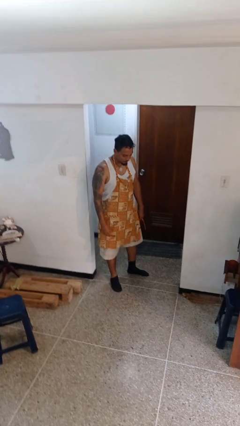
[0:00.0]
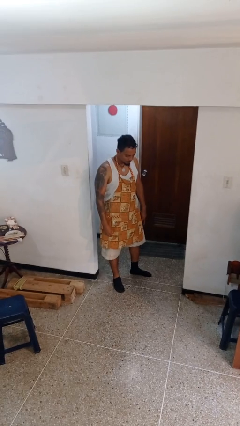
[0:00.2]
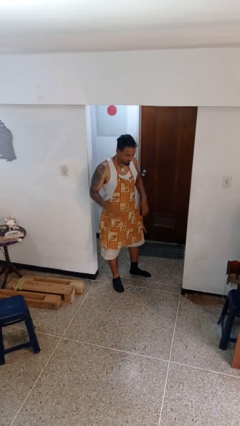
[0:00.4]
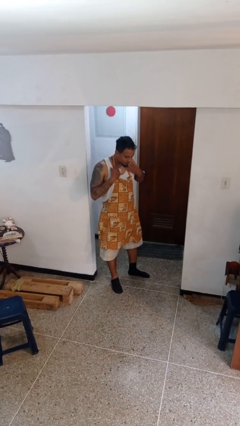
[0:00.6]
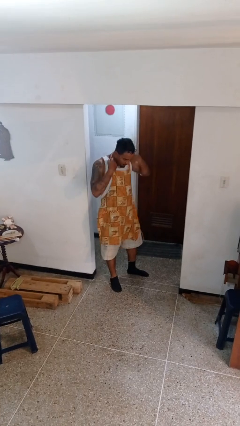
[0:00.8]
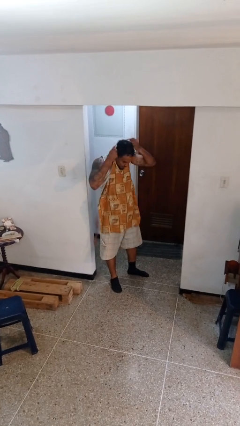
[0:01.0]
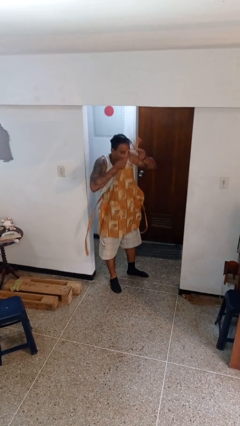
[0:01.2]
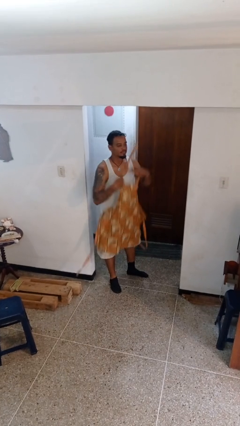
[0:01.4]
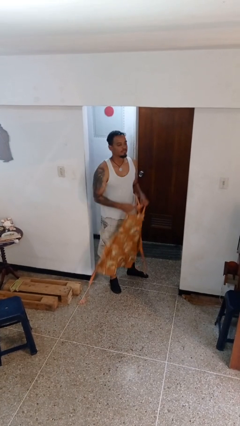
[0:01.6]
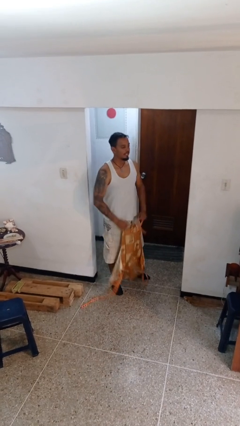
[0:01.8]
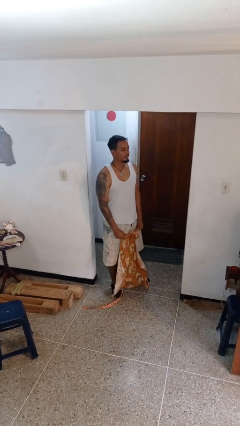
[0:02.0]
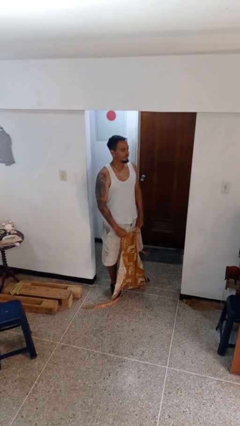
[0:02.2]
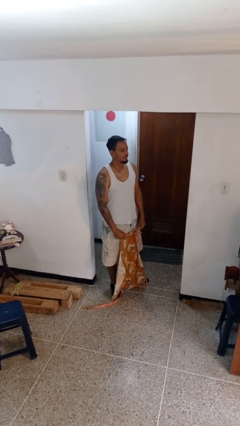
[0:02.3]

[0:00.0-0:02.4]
person takes off apron

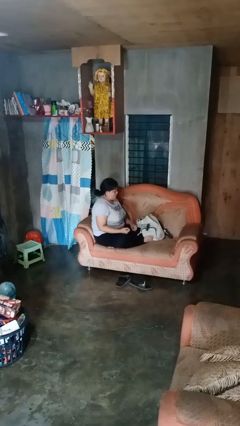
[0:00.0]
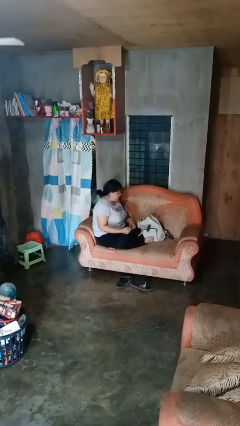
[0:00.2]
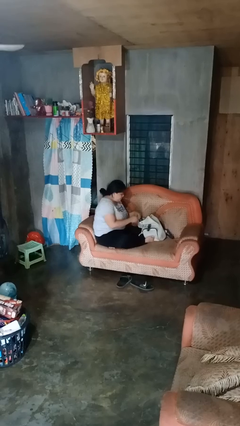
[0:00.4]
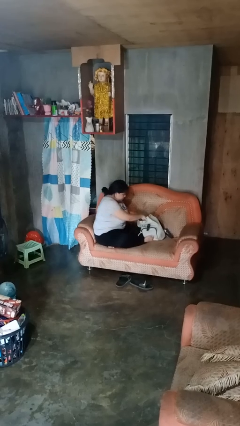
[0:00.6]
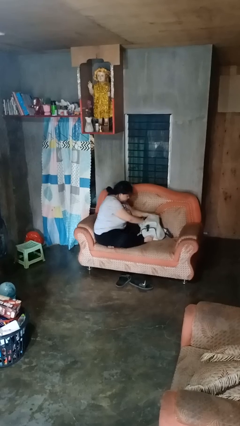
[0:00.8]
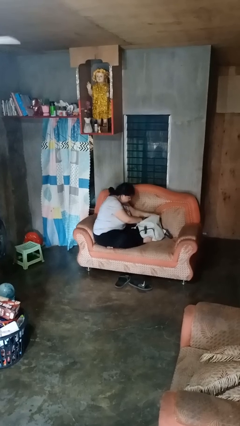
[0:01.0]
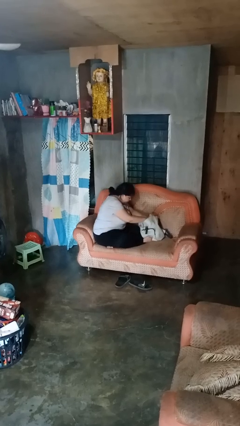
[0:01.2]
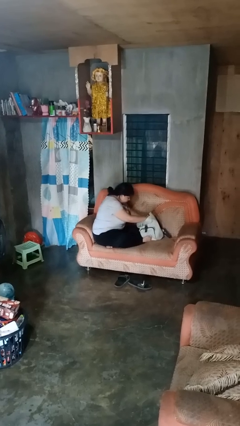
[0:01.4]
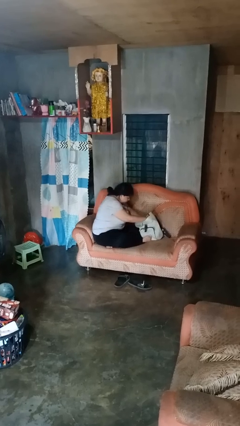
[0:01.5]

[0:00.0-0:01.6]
person searches in backpack

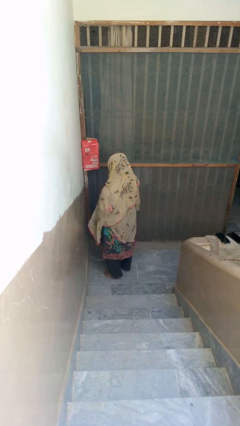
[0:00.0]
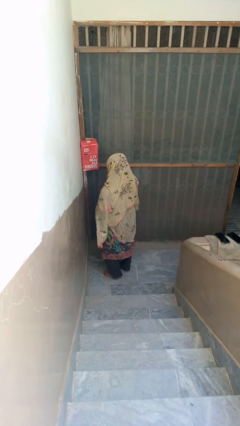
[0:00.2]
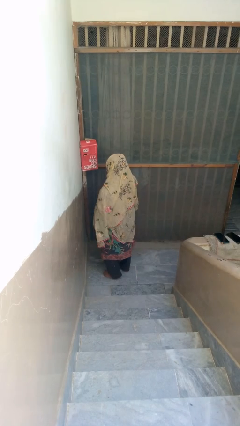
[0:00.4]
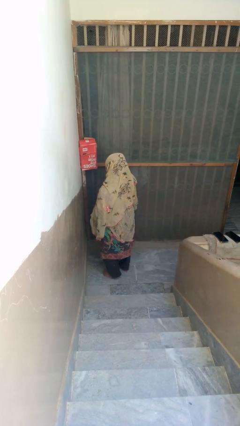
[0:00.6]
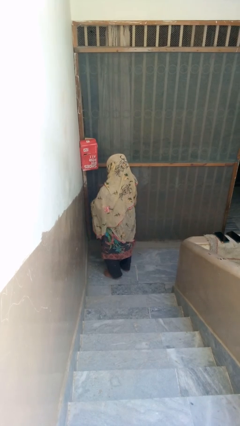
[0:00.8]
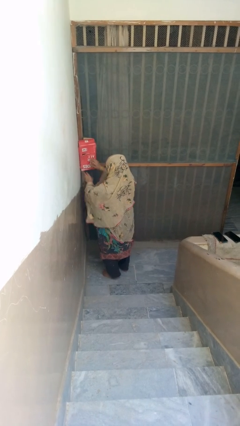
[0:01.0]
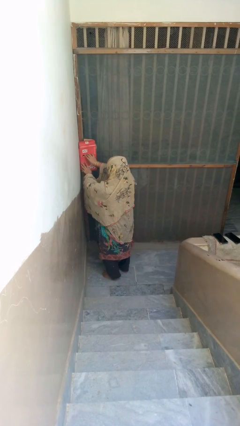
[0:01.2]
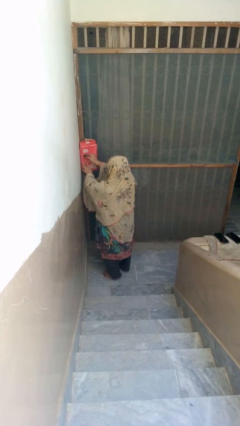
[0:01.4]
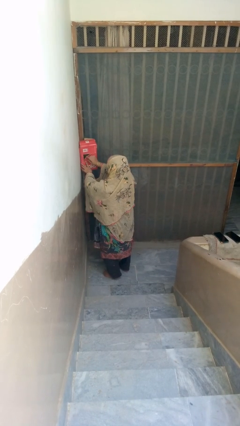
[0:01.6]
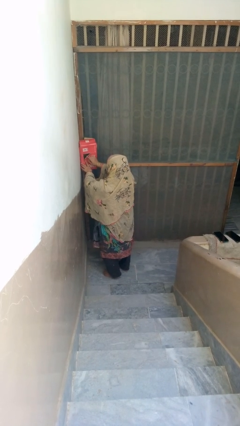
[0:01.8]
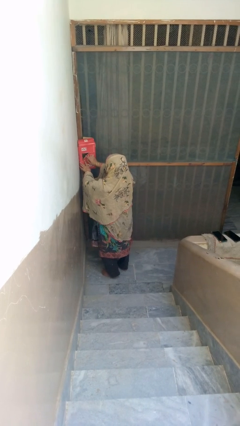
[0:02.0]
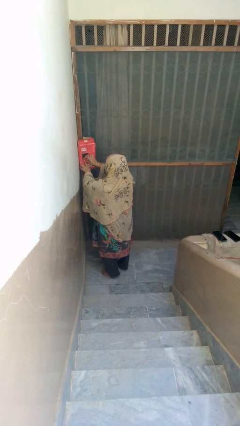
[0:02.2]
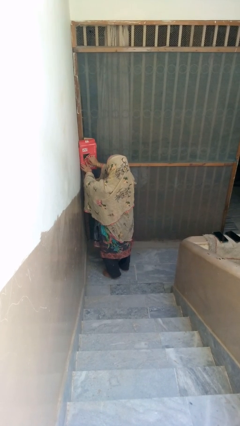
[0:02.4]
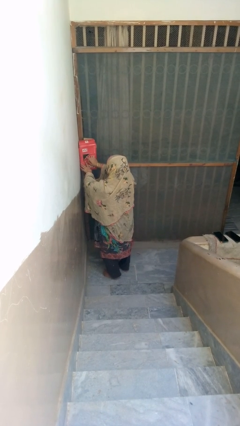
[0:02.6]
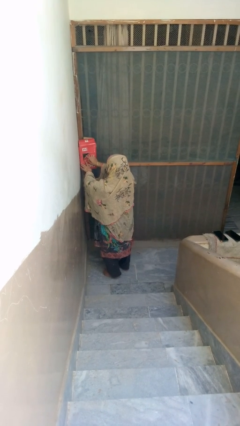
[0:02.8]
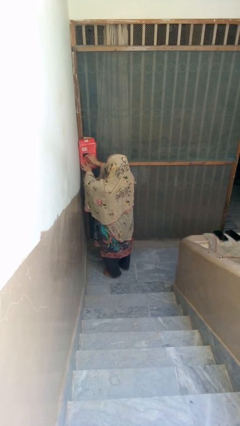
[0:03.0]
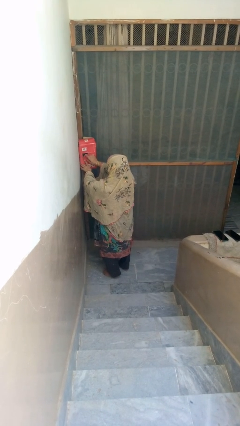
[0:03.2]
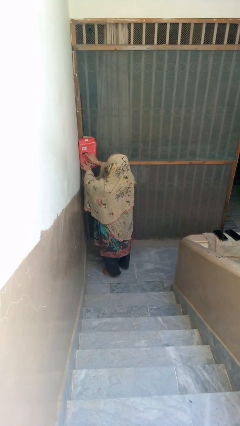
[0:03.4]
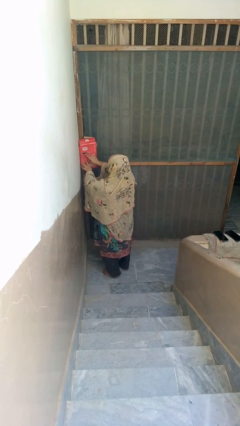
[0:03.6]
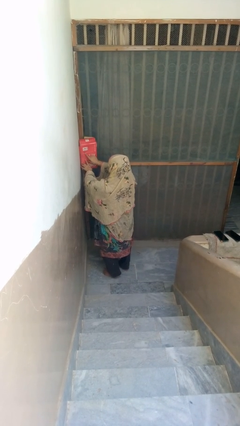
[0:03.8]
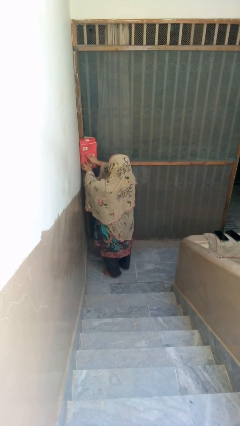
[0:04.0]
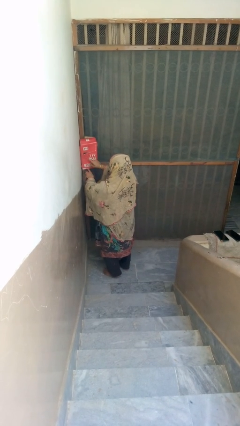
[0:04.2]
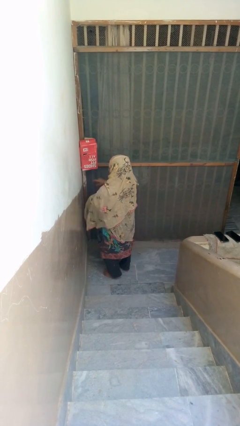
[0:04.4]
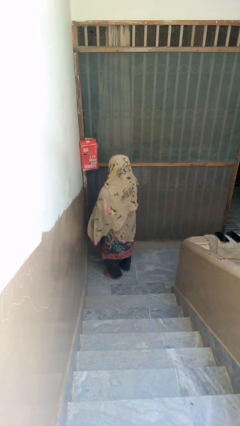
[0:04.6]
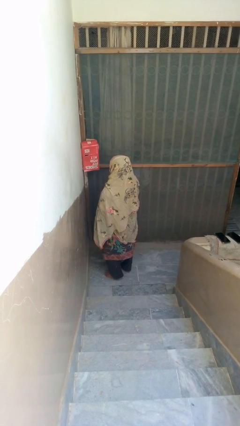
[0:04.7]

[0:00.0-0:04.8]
person opens mailbox

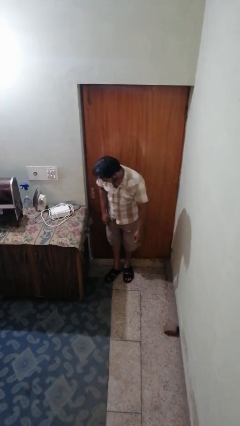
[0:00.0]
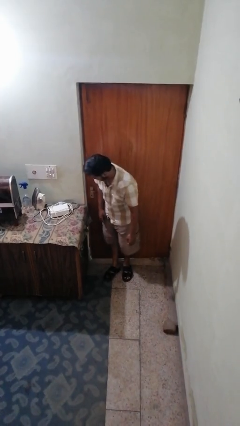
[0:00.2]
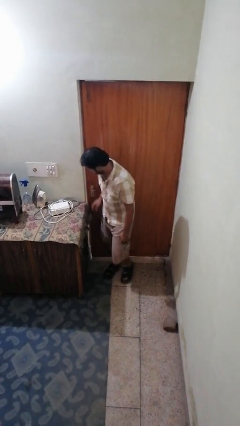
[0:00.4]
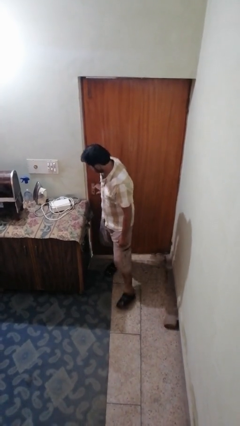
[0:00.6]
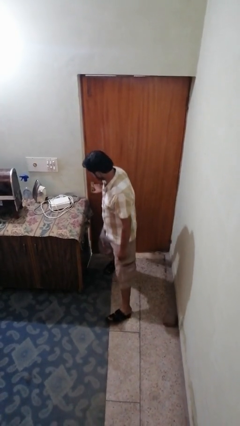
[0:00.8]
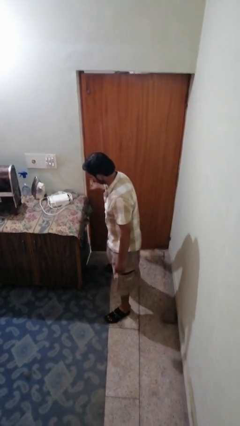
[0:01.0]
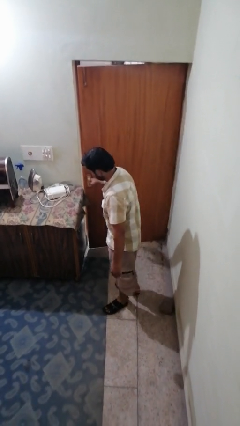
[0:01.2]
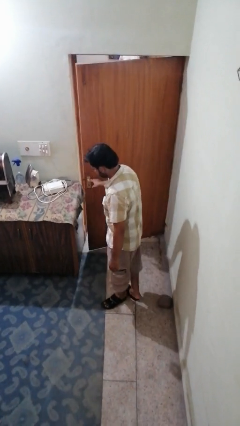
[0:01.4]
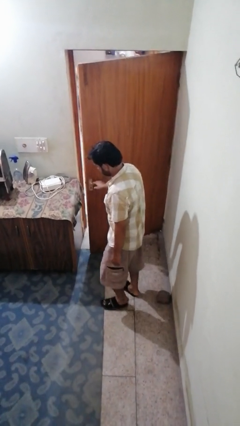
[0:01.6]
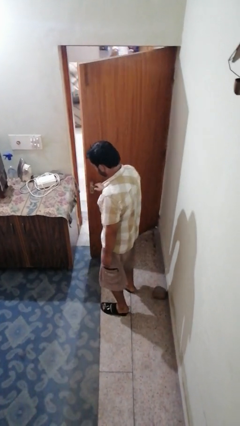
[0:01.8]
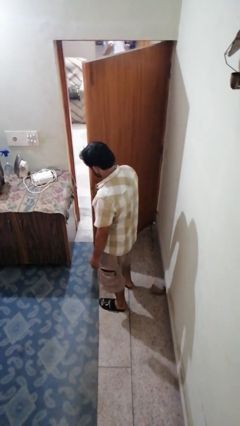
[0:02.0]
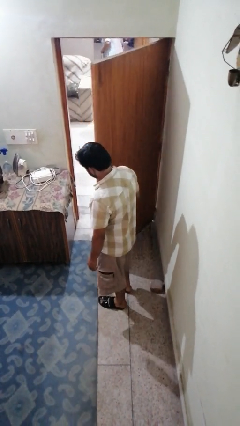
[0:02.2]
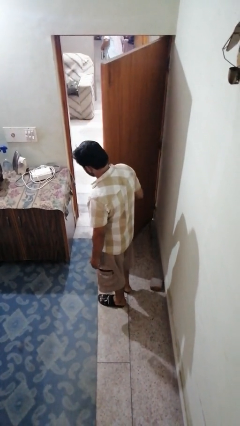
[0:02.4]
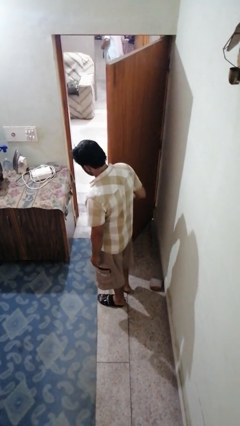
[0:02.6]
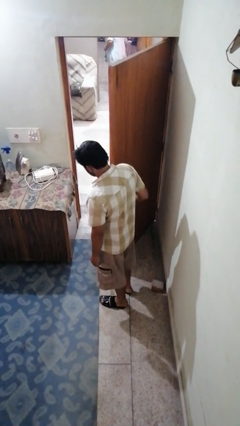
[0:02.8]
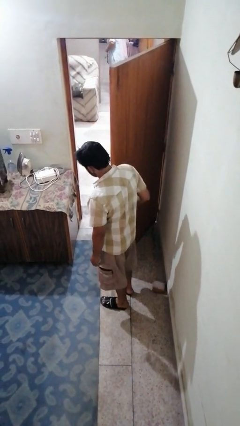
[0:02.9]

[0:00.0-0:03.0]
person opens facility door

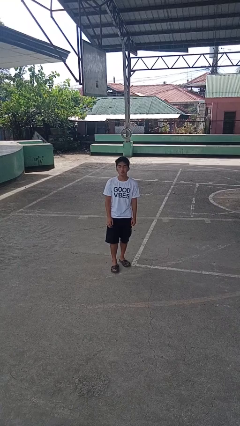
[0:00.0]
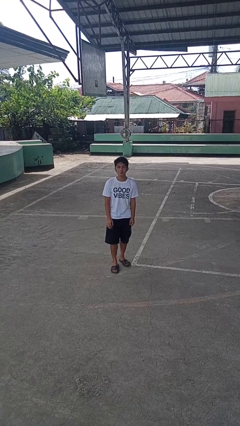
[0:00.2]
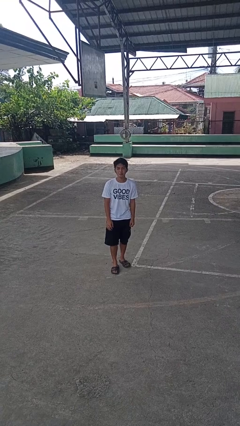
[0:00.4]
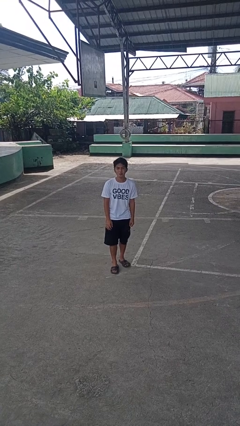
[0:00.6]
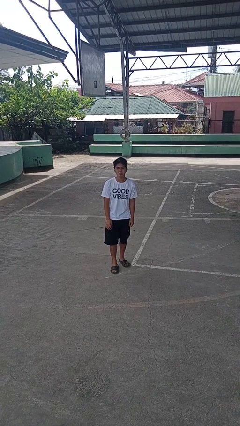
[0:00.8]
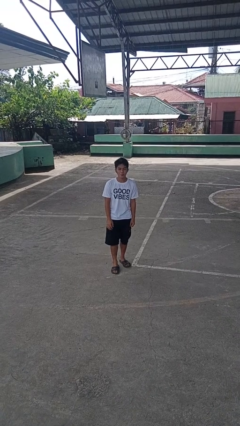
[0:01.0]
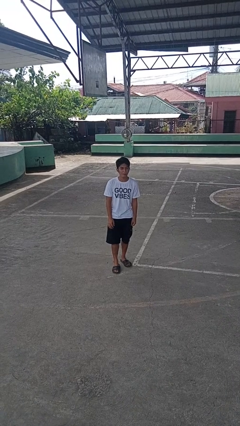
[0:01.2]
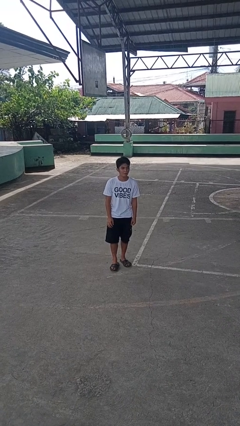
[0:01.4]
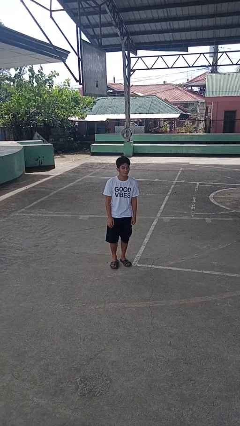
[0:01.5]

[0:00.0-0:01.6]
person sticks out tongue

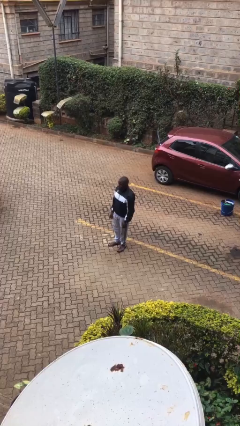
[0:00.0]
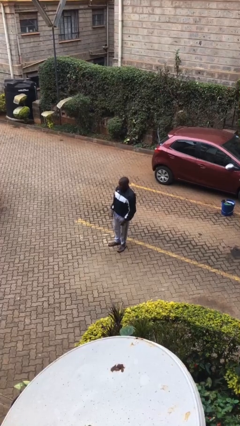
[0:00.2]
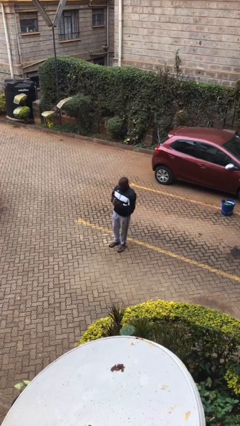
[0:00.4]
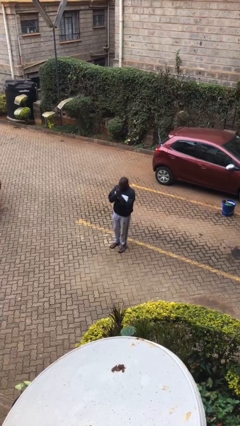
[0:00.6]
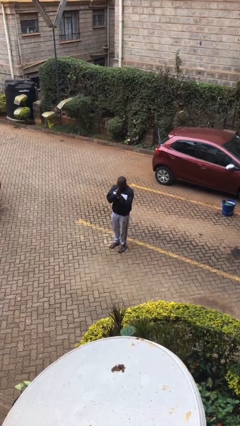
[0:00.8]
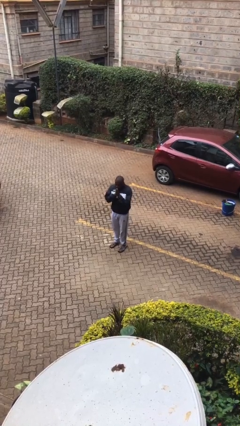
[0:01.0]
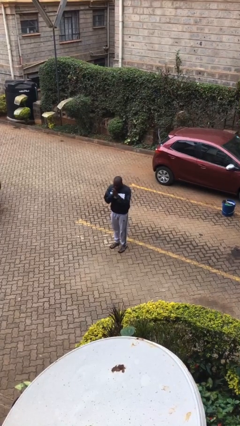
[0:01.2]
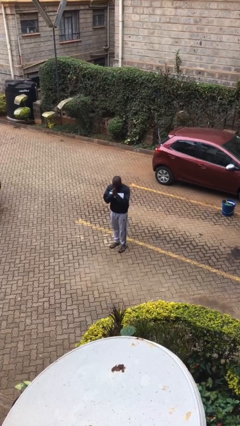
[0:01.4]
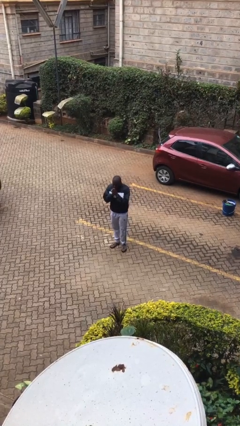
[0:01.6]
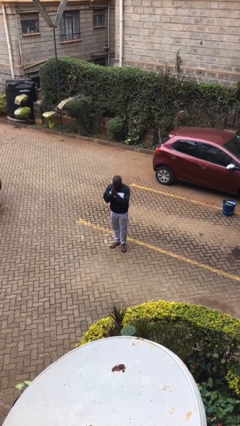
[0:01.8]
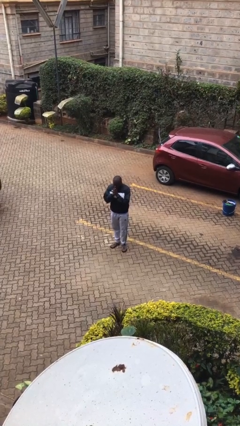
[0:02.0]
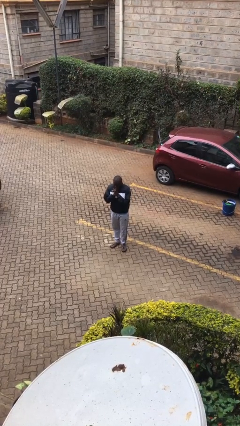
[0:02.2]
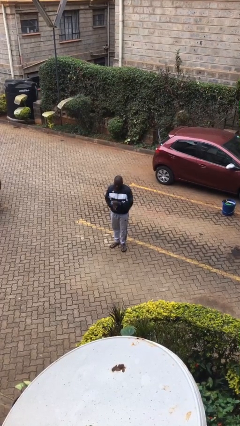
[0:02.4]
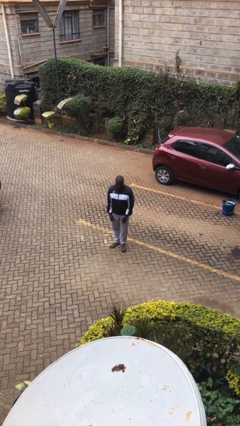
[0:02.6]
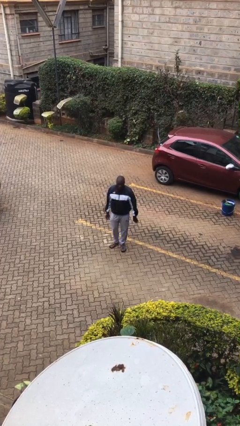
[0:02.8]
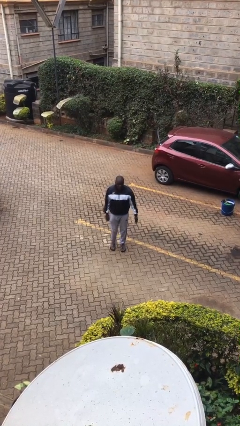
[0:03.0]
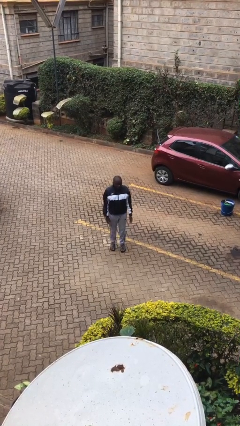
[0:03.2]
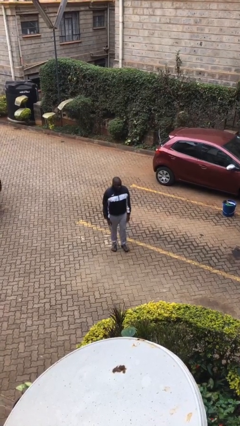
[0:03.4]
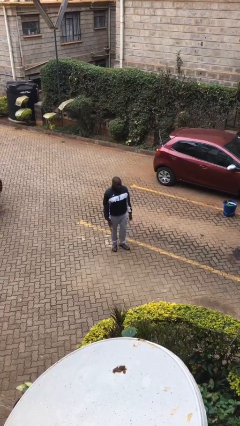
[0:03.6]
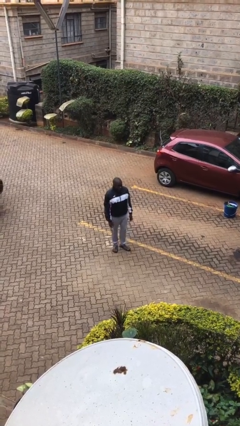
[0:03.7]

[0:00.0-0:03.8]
person blows into hands
